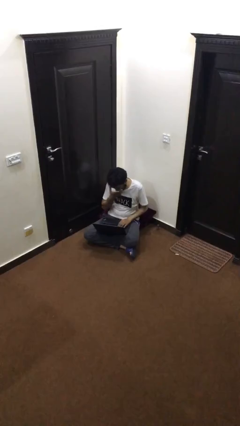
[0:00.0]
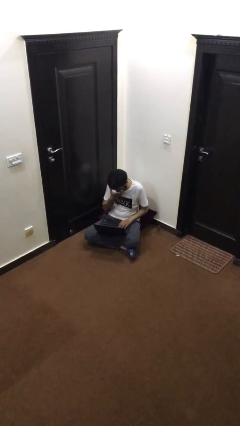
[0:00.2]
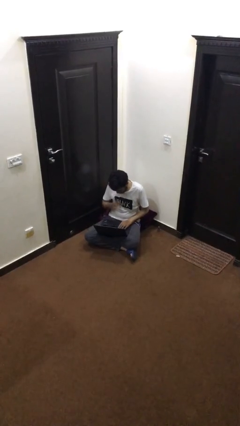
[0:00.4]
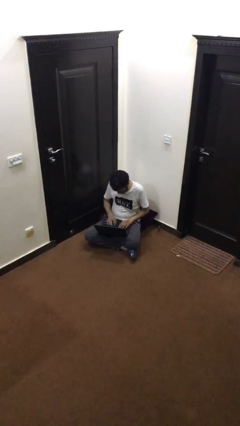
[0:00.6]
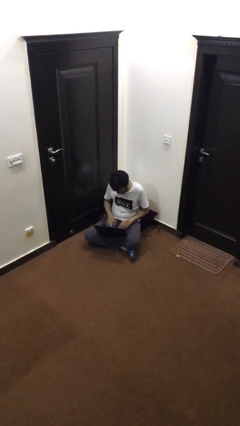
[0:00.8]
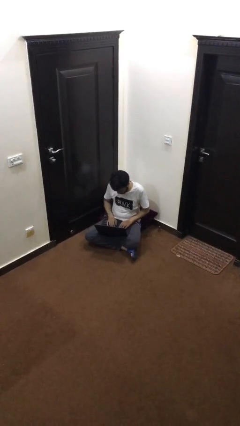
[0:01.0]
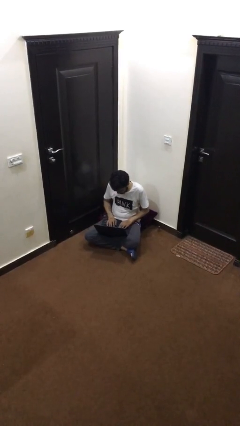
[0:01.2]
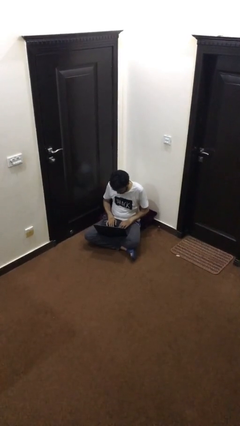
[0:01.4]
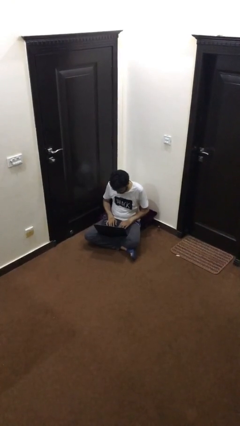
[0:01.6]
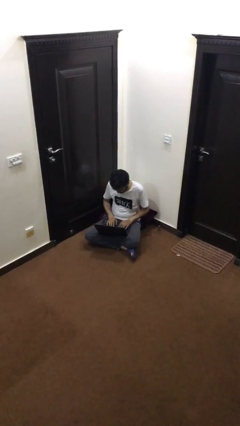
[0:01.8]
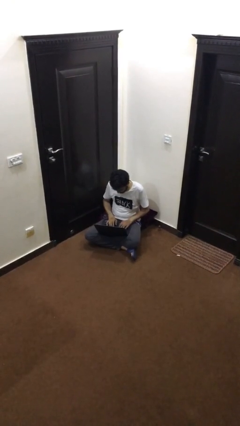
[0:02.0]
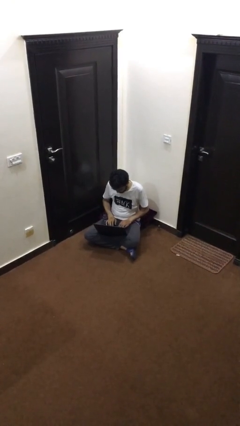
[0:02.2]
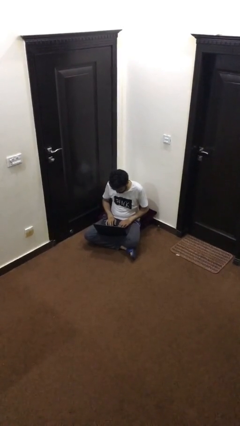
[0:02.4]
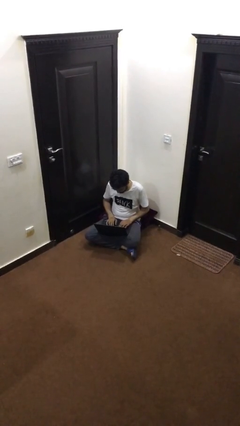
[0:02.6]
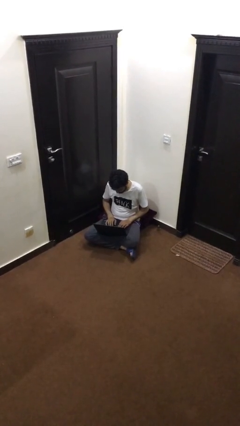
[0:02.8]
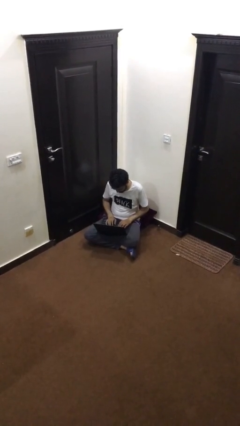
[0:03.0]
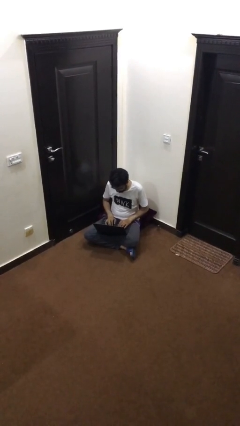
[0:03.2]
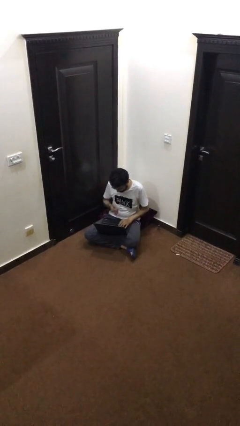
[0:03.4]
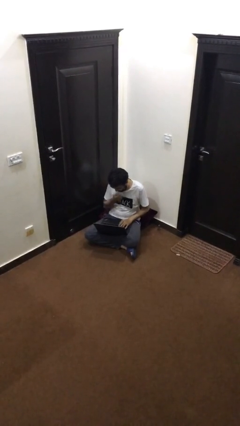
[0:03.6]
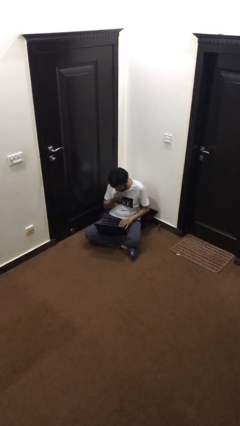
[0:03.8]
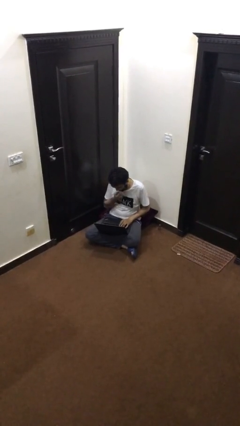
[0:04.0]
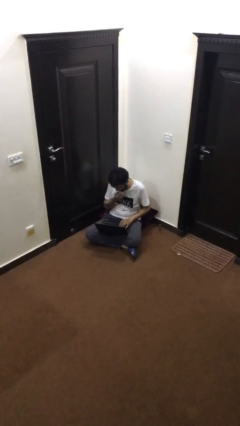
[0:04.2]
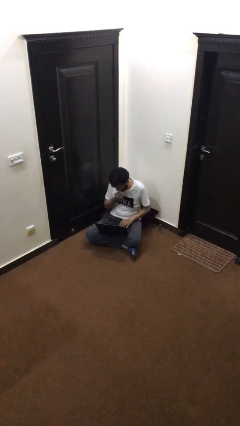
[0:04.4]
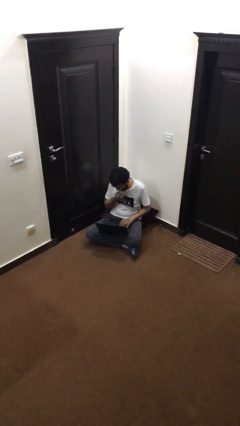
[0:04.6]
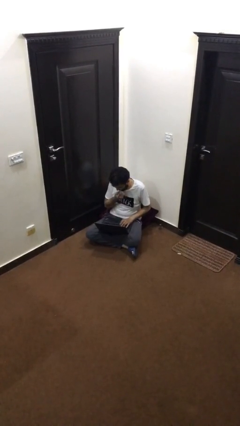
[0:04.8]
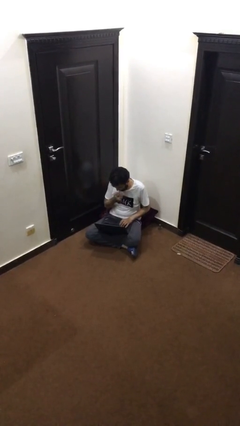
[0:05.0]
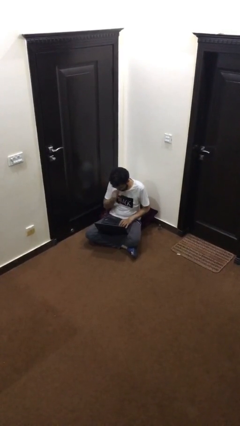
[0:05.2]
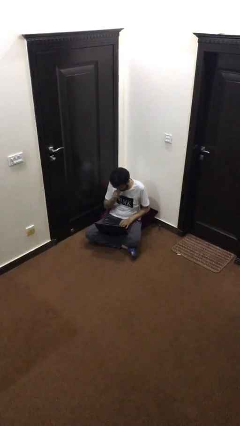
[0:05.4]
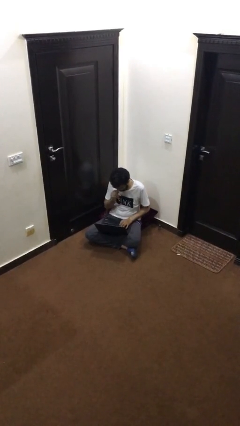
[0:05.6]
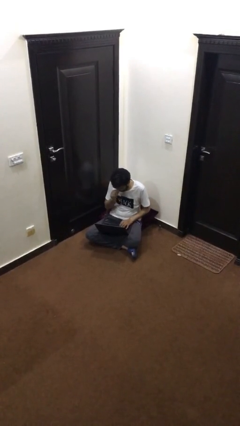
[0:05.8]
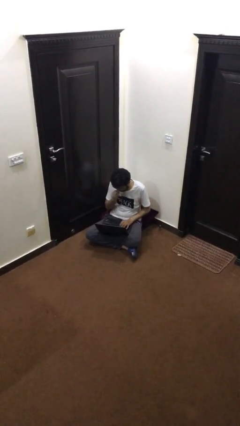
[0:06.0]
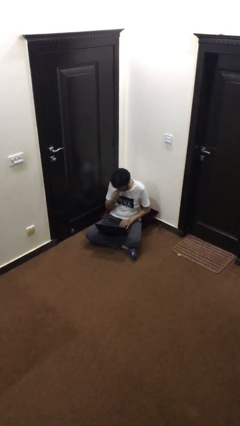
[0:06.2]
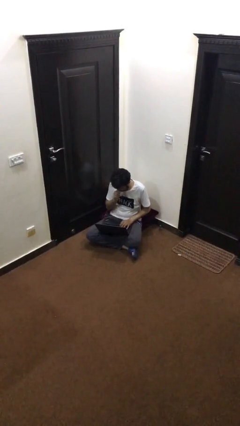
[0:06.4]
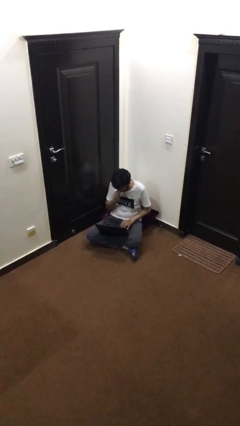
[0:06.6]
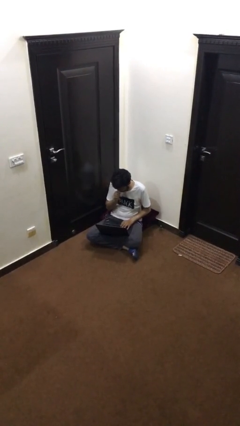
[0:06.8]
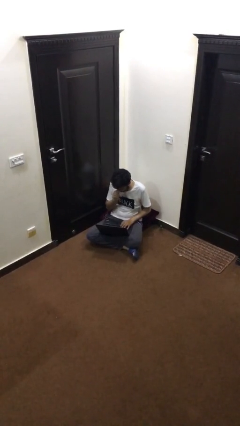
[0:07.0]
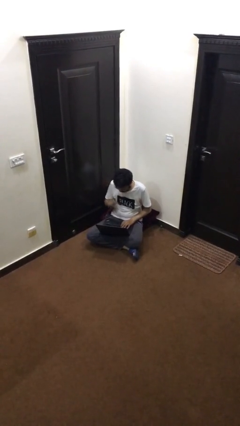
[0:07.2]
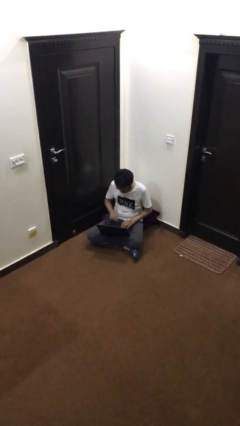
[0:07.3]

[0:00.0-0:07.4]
person interacts with laptop

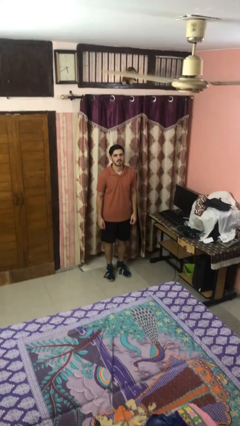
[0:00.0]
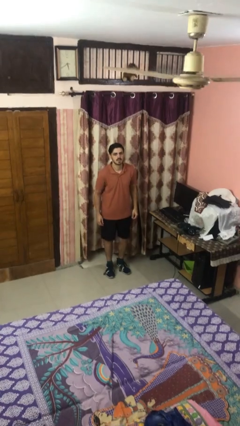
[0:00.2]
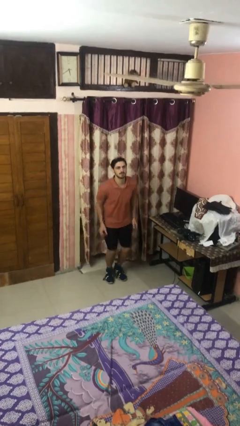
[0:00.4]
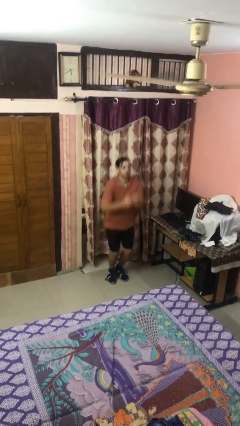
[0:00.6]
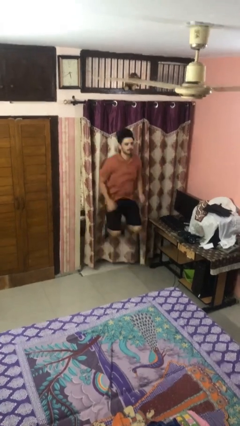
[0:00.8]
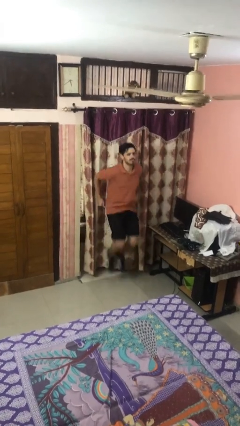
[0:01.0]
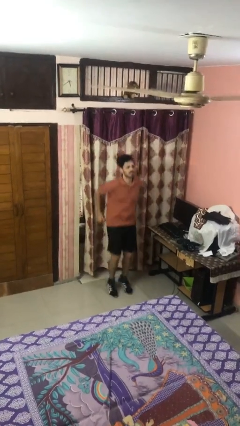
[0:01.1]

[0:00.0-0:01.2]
person jumps

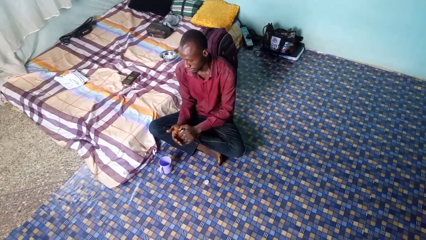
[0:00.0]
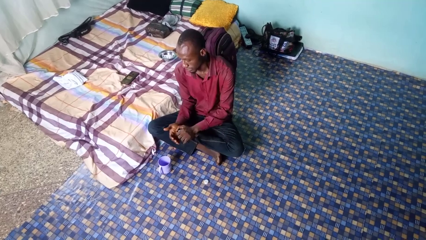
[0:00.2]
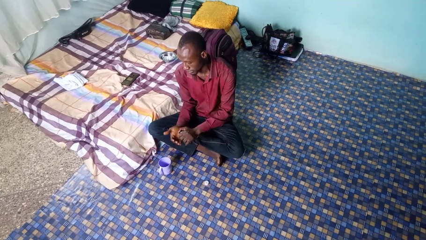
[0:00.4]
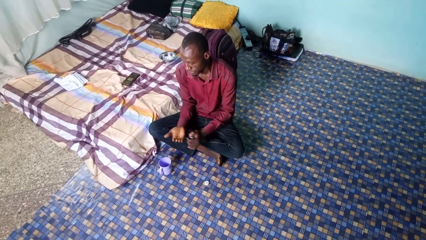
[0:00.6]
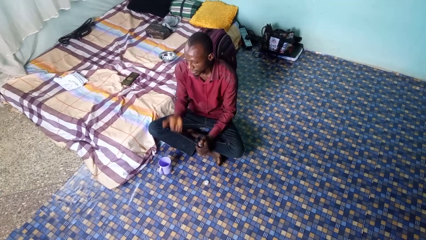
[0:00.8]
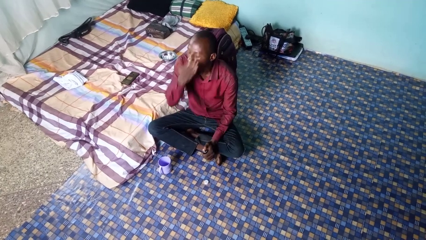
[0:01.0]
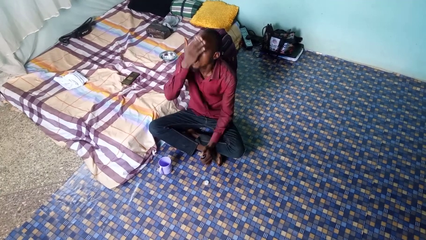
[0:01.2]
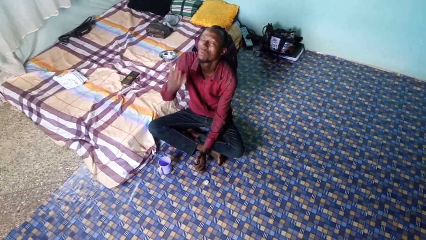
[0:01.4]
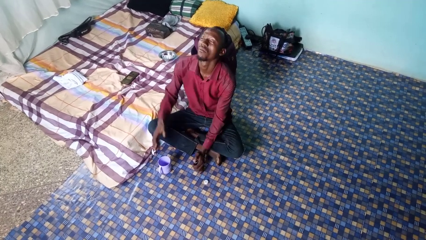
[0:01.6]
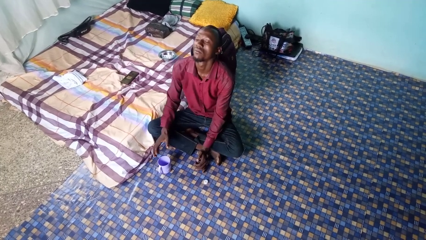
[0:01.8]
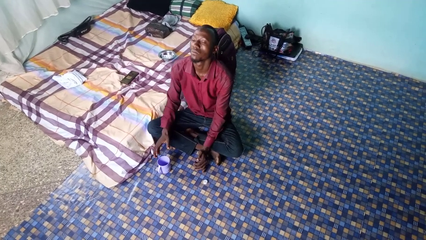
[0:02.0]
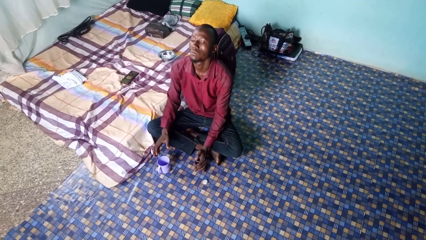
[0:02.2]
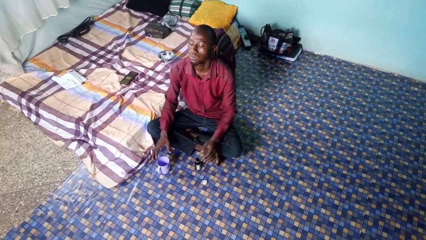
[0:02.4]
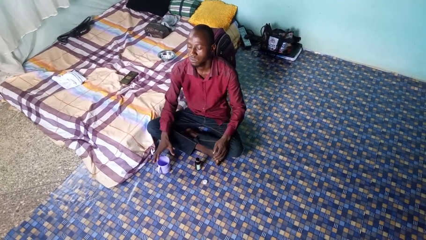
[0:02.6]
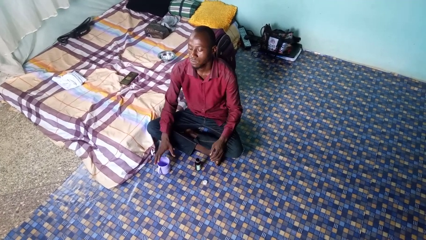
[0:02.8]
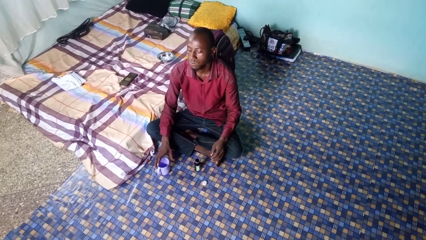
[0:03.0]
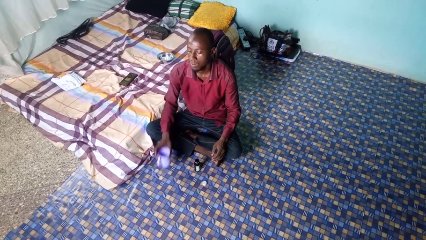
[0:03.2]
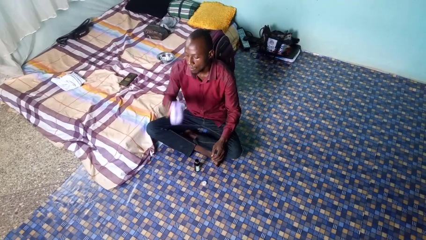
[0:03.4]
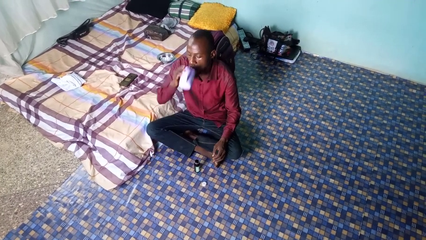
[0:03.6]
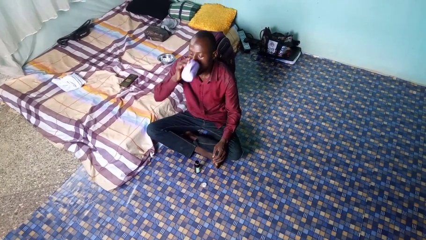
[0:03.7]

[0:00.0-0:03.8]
person takes medicine pills

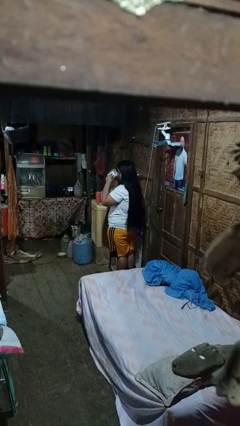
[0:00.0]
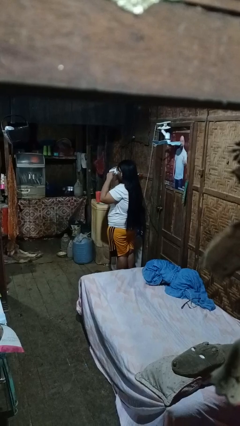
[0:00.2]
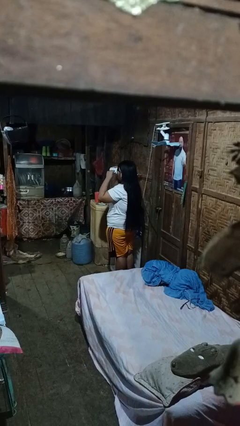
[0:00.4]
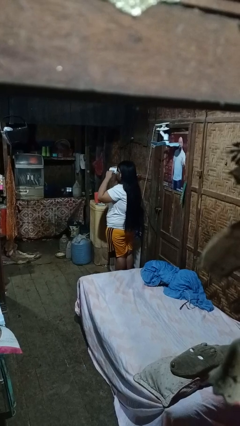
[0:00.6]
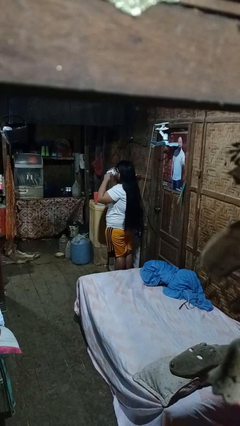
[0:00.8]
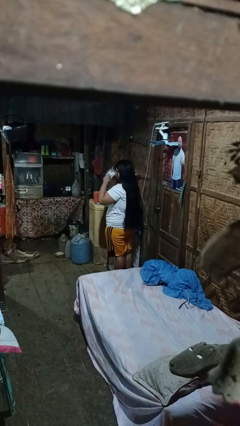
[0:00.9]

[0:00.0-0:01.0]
person drinks from mug

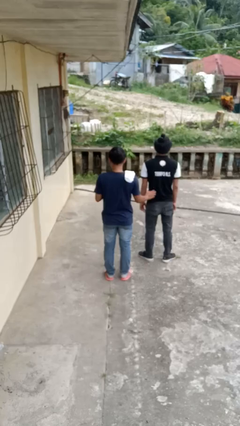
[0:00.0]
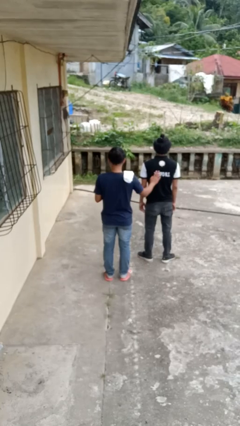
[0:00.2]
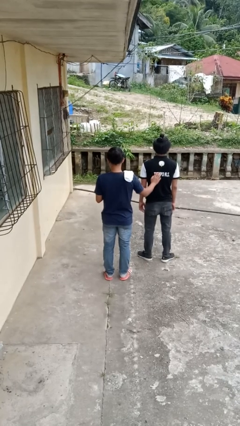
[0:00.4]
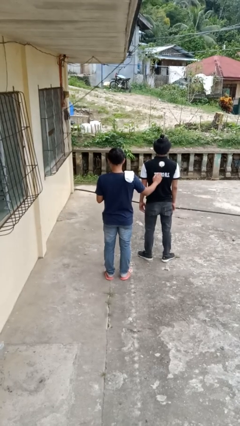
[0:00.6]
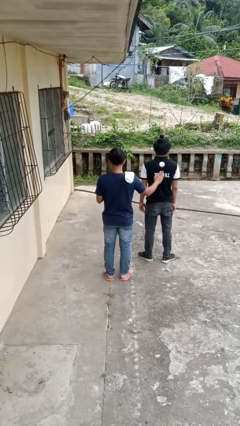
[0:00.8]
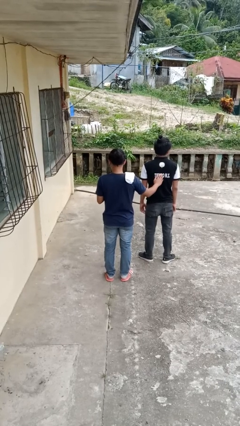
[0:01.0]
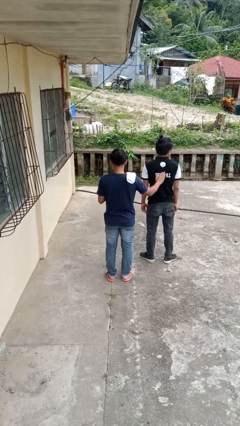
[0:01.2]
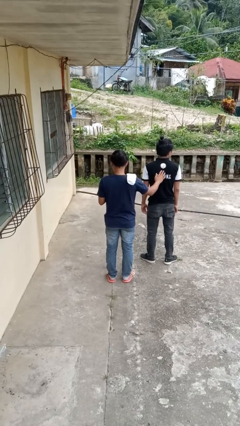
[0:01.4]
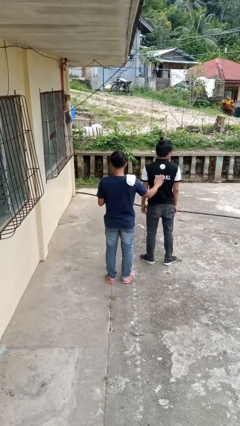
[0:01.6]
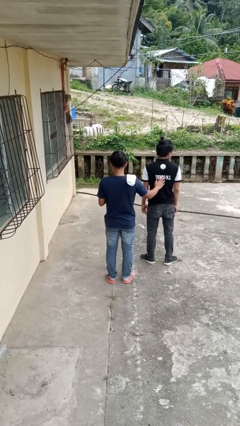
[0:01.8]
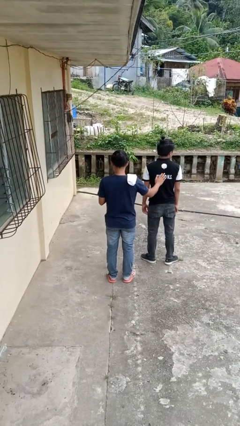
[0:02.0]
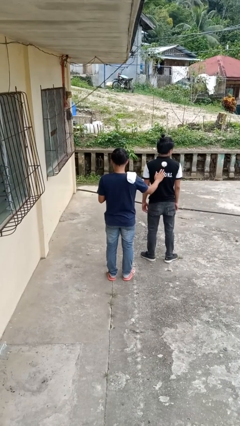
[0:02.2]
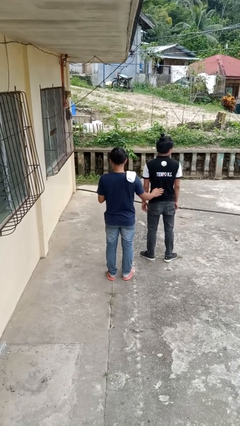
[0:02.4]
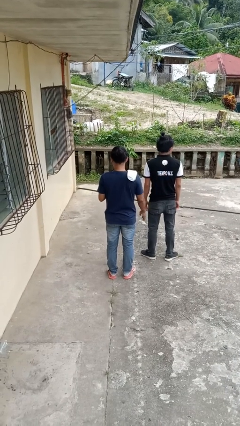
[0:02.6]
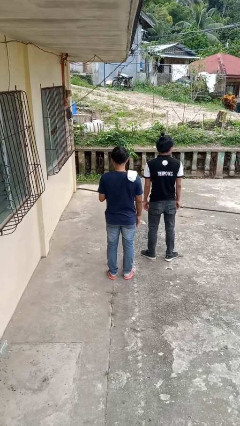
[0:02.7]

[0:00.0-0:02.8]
person touches back of person

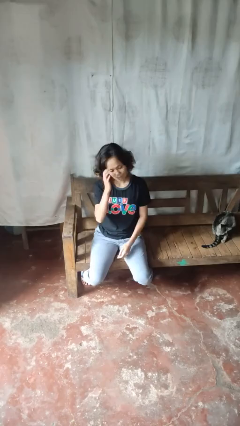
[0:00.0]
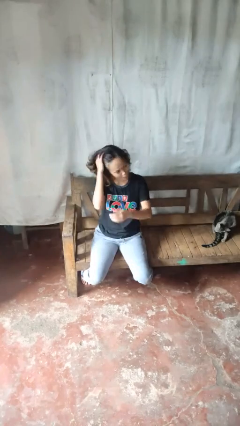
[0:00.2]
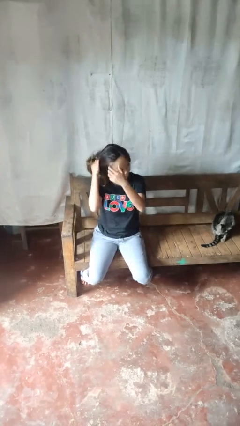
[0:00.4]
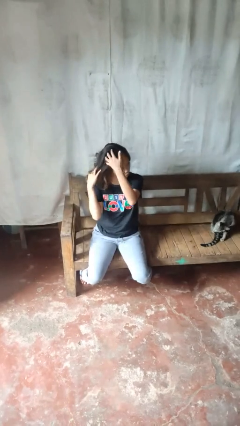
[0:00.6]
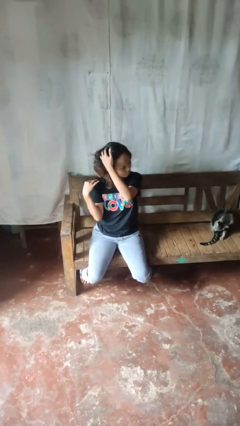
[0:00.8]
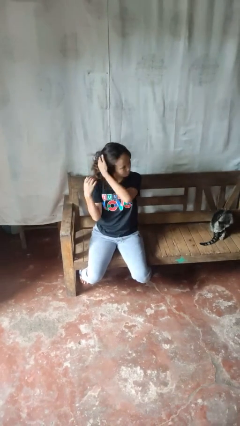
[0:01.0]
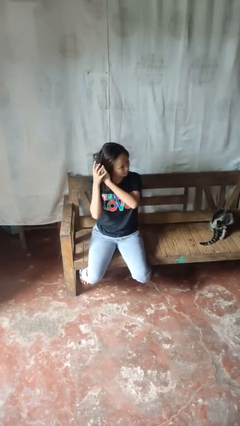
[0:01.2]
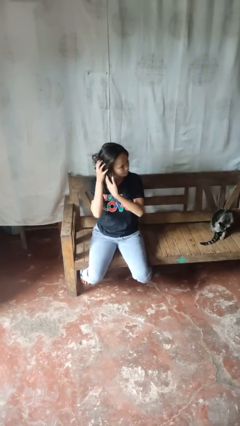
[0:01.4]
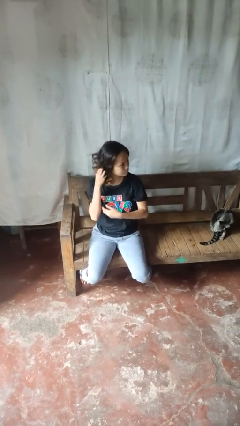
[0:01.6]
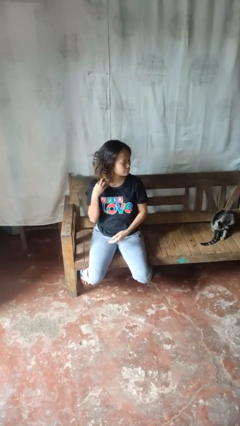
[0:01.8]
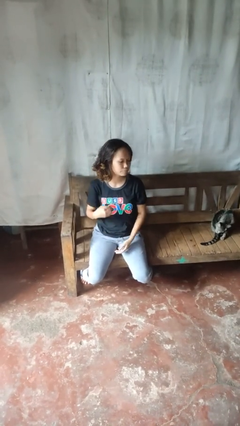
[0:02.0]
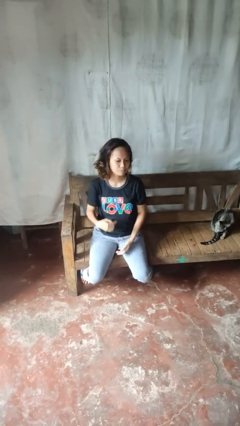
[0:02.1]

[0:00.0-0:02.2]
person strokes hair
